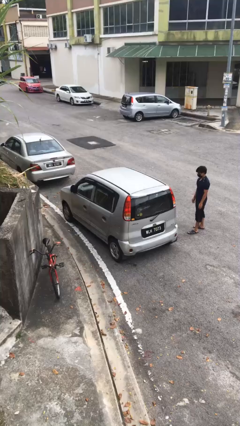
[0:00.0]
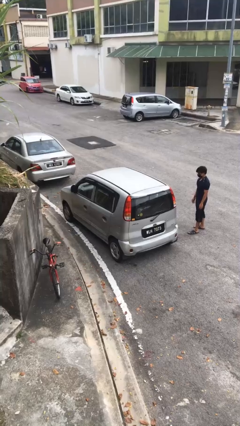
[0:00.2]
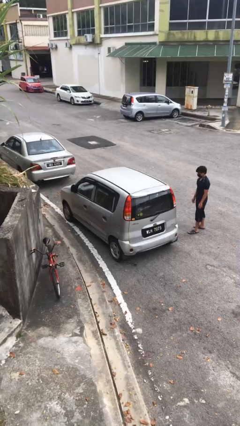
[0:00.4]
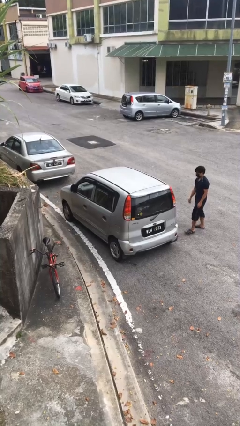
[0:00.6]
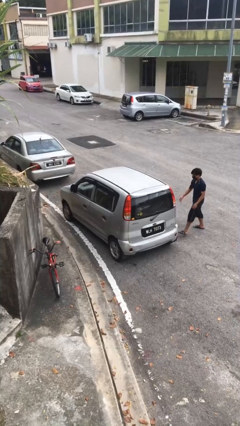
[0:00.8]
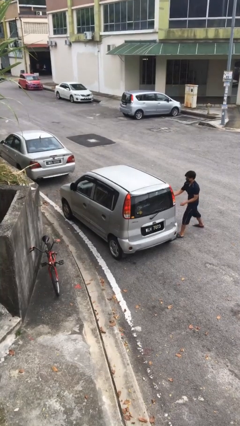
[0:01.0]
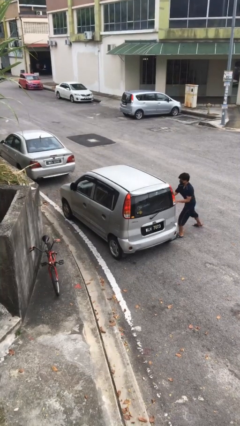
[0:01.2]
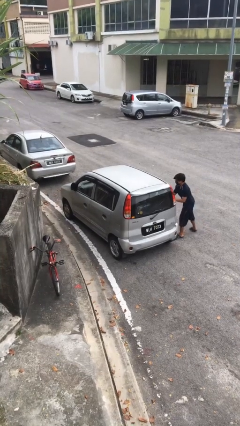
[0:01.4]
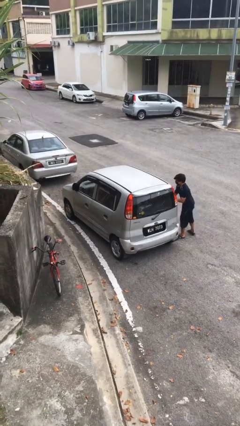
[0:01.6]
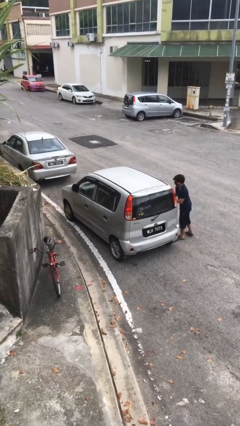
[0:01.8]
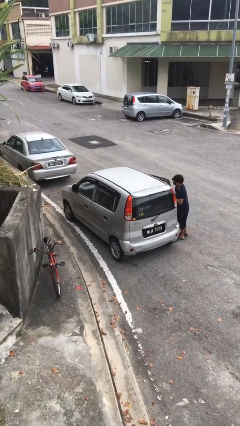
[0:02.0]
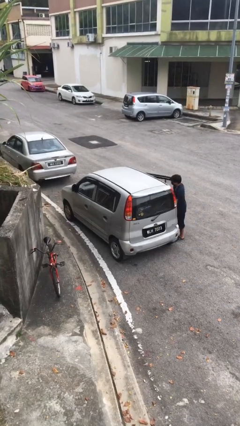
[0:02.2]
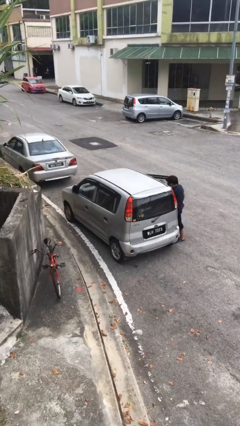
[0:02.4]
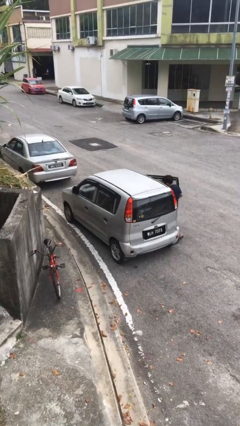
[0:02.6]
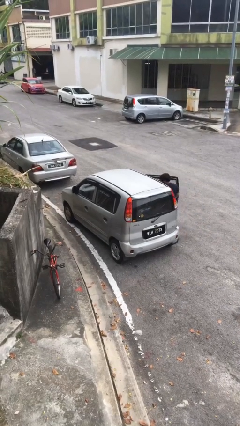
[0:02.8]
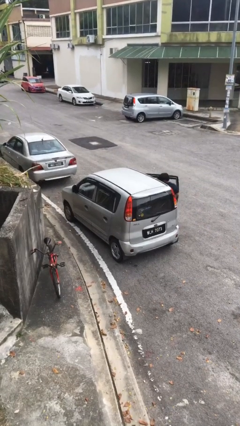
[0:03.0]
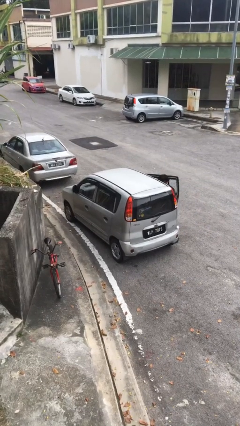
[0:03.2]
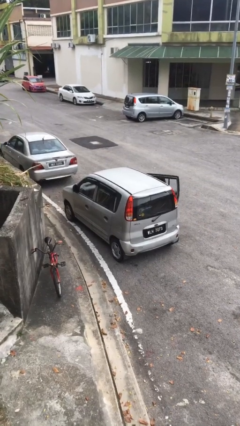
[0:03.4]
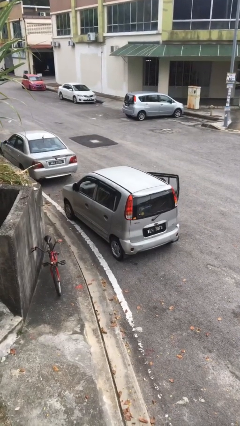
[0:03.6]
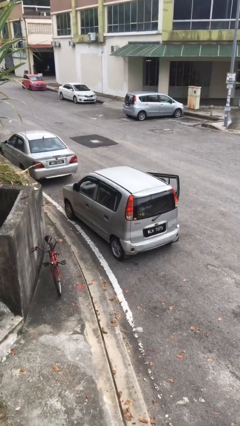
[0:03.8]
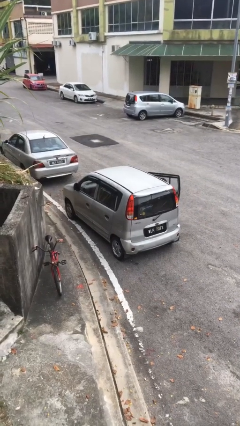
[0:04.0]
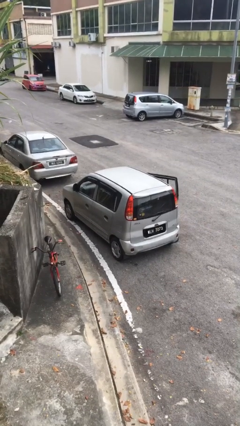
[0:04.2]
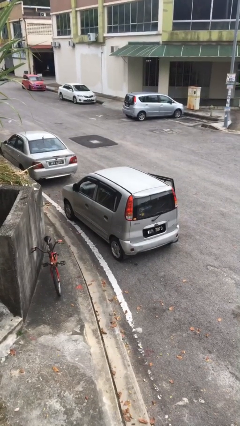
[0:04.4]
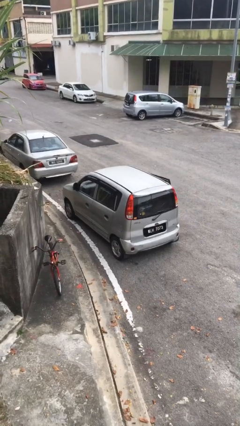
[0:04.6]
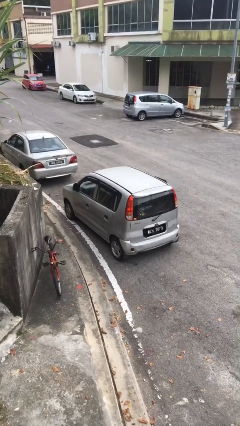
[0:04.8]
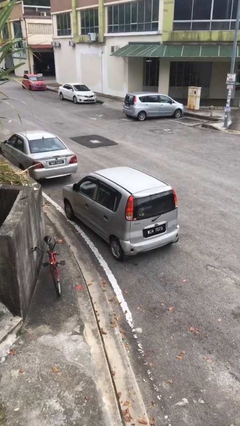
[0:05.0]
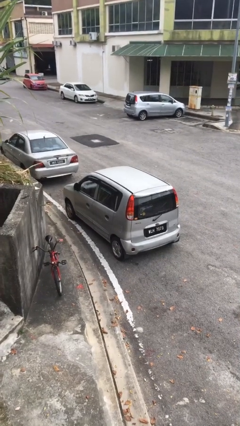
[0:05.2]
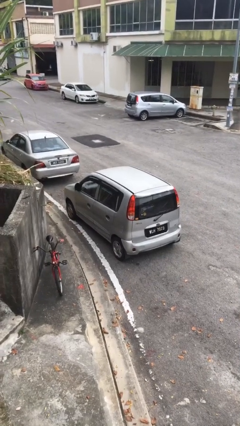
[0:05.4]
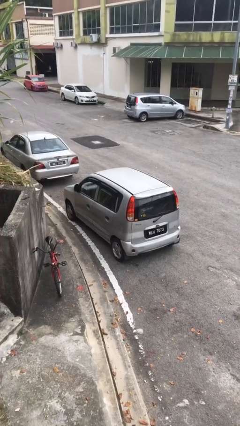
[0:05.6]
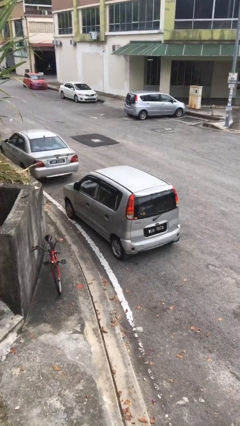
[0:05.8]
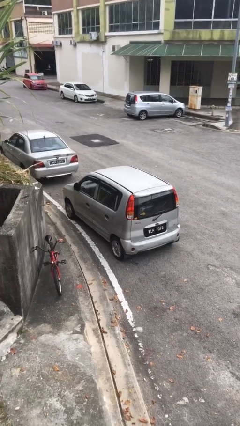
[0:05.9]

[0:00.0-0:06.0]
car picks up person

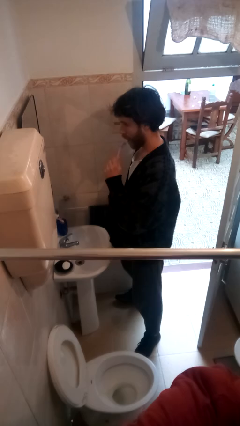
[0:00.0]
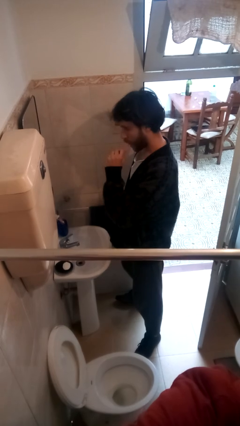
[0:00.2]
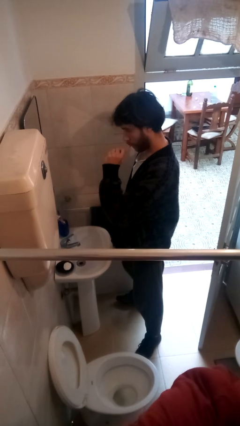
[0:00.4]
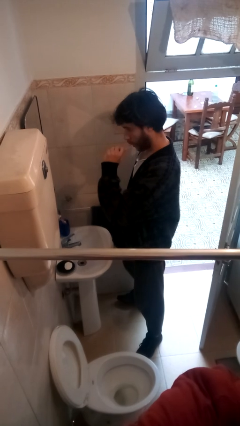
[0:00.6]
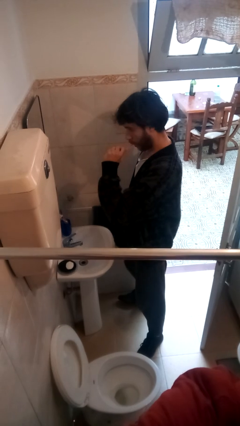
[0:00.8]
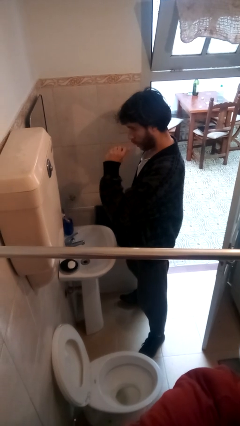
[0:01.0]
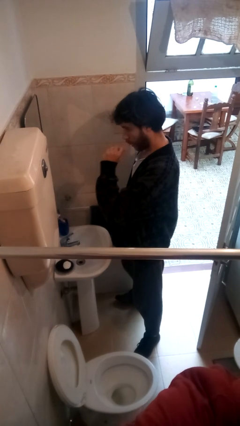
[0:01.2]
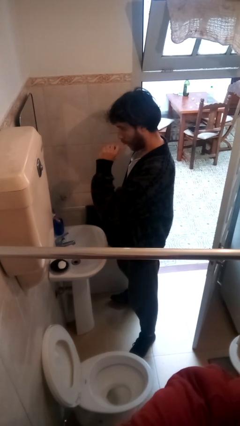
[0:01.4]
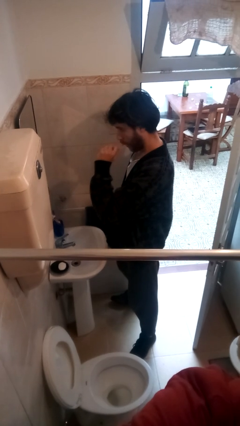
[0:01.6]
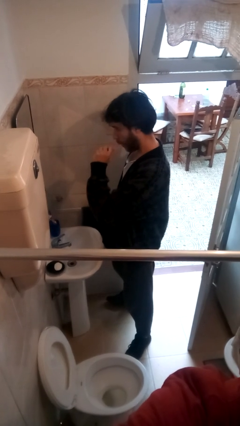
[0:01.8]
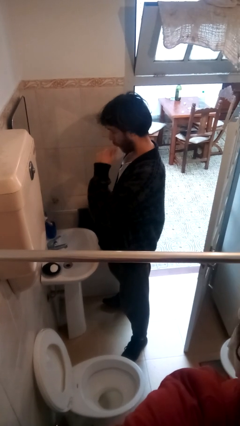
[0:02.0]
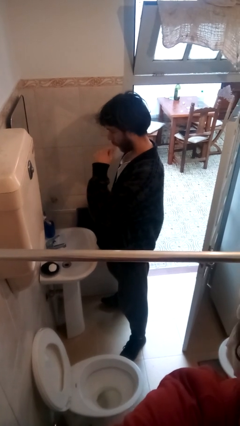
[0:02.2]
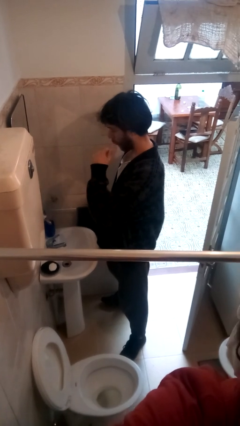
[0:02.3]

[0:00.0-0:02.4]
person brushes teeth

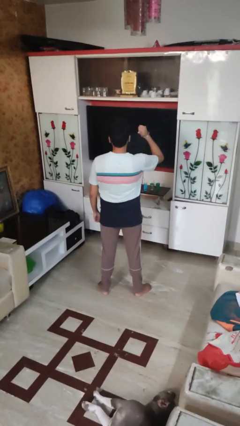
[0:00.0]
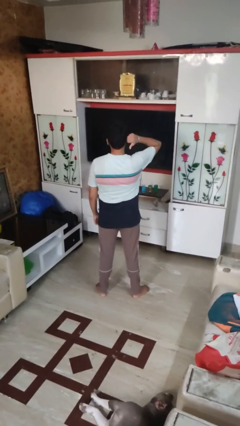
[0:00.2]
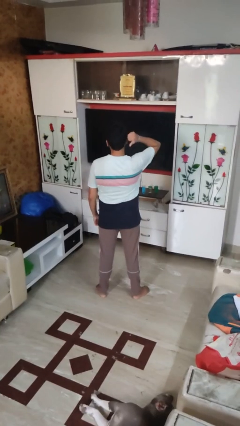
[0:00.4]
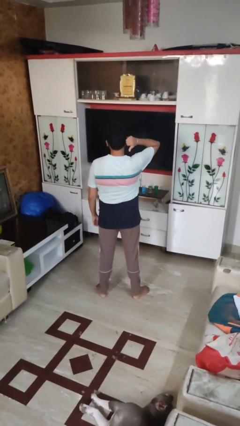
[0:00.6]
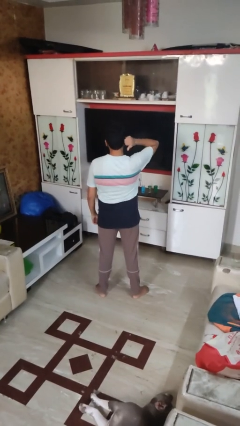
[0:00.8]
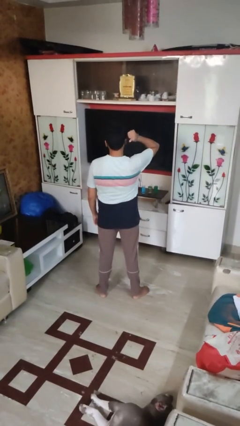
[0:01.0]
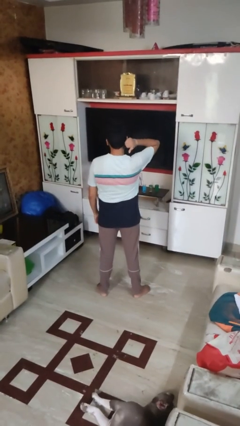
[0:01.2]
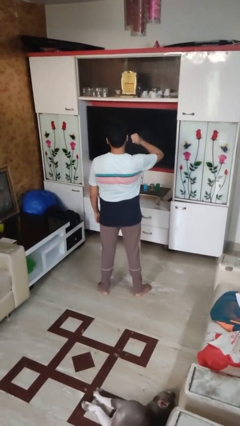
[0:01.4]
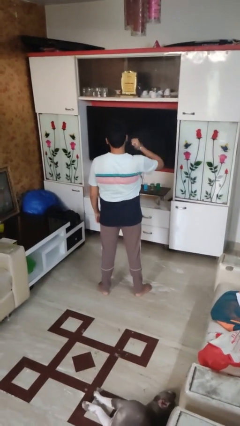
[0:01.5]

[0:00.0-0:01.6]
person gestures behind me

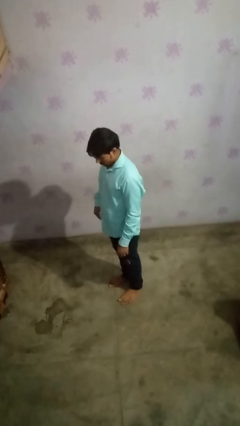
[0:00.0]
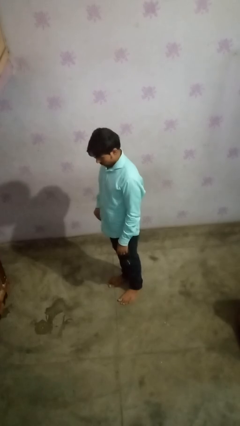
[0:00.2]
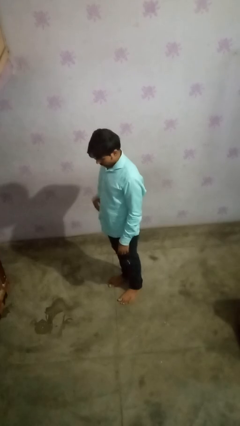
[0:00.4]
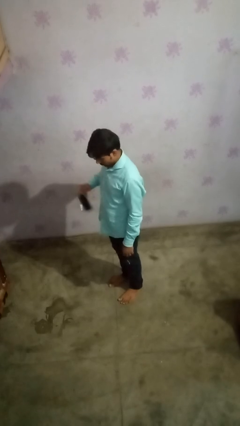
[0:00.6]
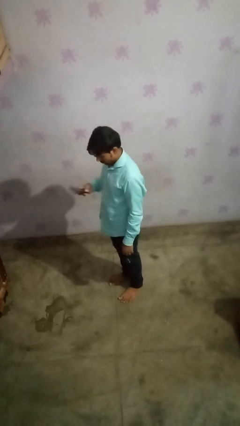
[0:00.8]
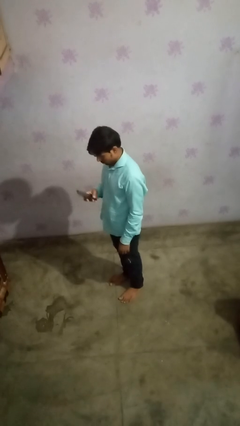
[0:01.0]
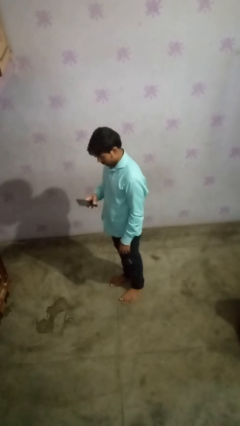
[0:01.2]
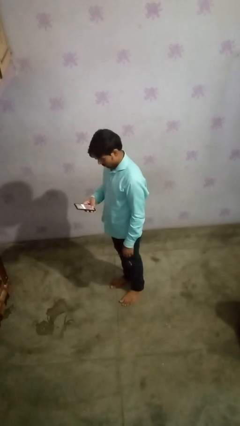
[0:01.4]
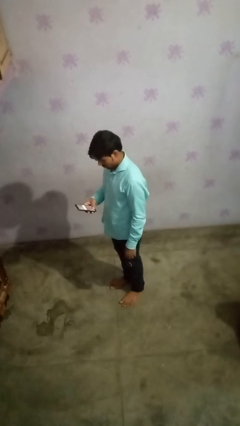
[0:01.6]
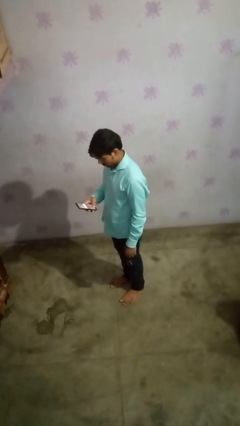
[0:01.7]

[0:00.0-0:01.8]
person takes phone from pocket

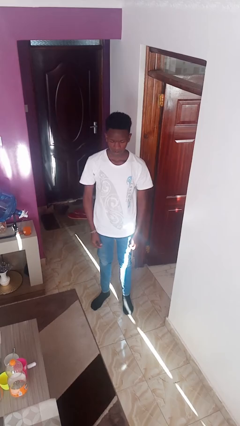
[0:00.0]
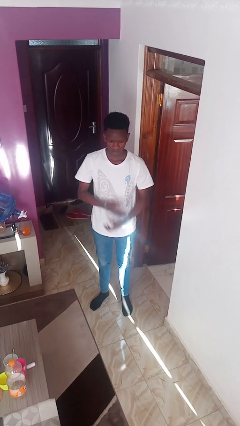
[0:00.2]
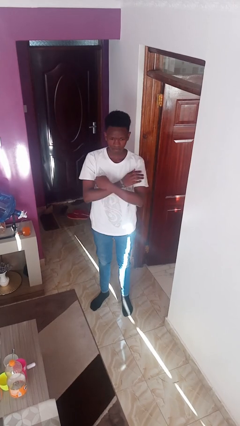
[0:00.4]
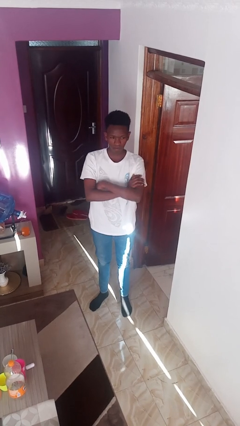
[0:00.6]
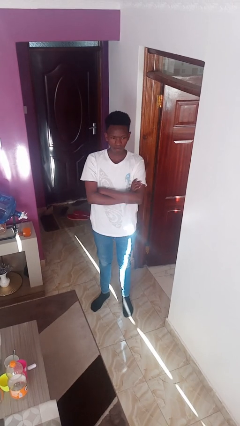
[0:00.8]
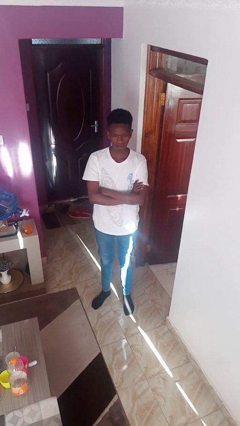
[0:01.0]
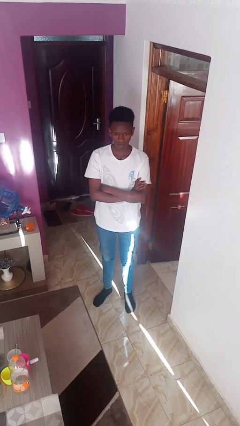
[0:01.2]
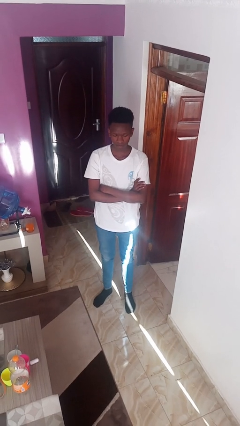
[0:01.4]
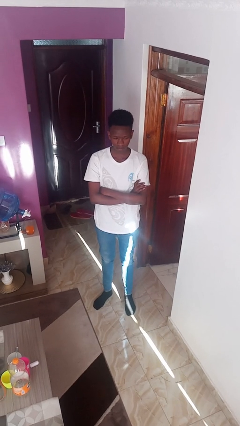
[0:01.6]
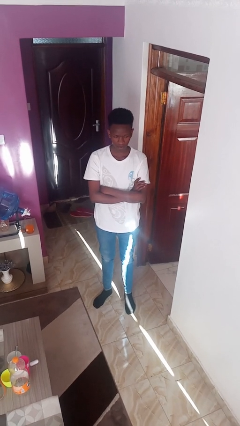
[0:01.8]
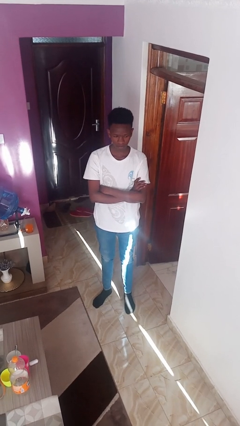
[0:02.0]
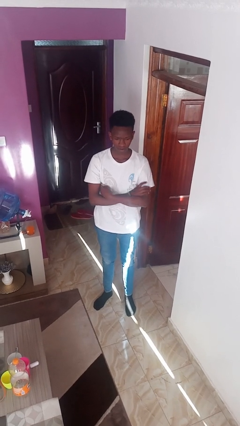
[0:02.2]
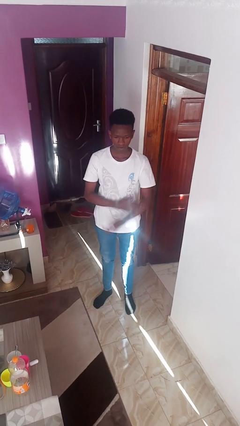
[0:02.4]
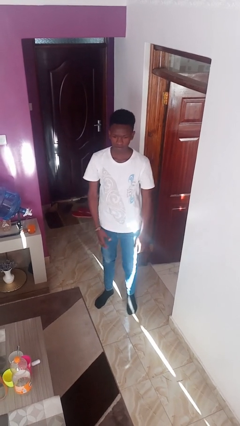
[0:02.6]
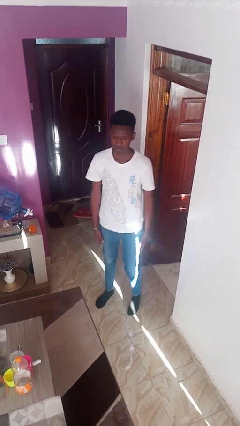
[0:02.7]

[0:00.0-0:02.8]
person crosses arms

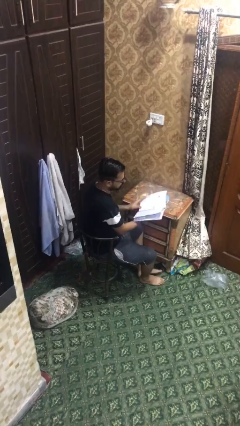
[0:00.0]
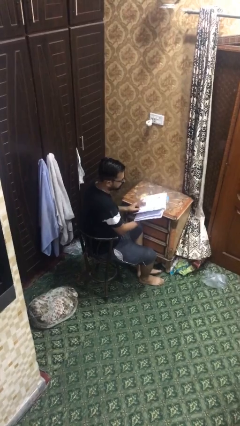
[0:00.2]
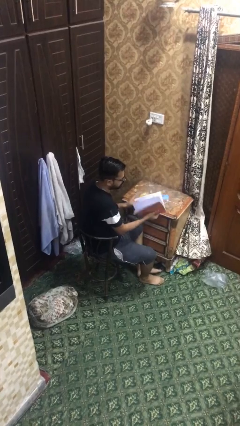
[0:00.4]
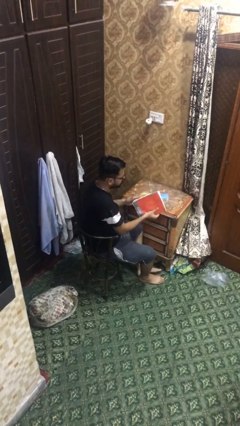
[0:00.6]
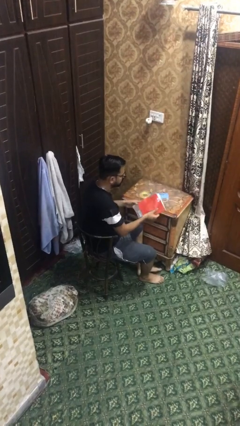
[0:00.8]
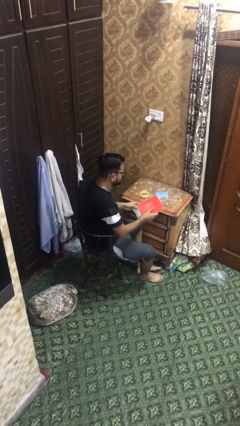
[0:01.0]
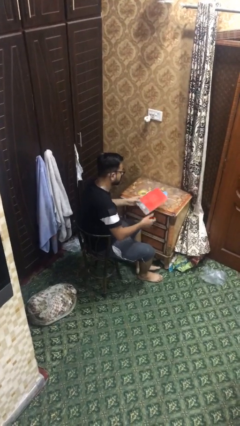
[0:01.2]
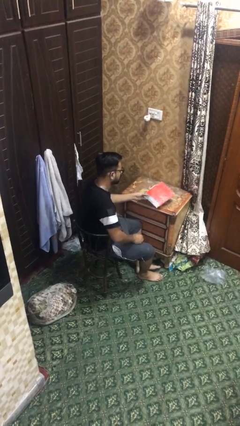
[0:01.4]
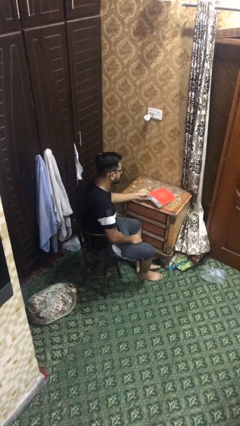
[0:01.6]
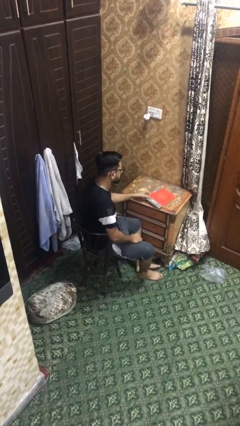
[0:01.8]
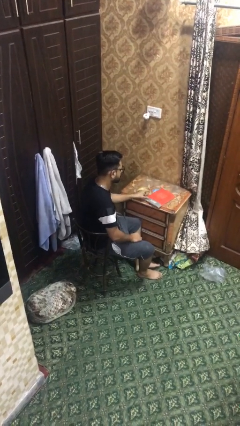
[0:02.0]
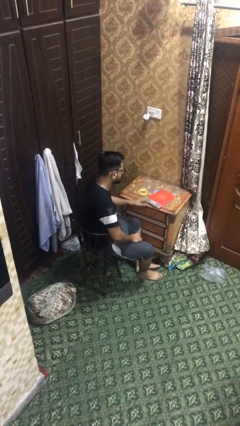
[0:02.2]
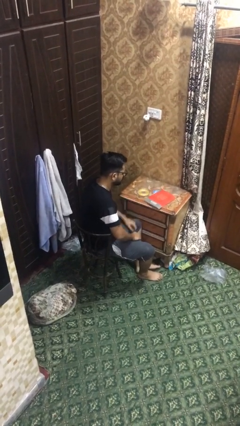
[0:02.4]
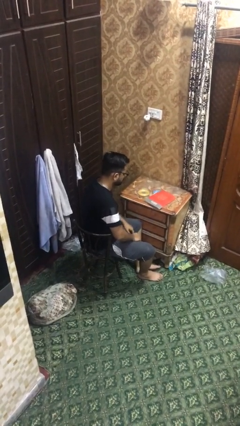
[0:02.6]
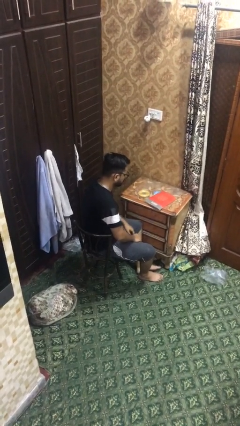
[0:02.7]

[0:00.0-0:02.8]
person puts down object on table

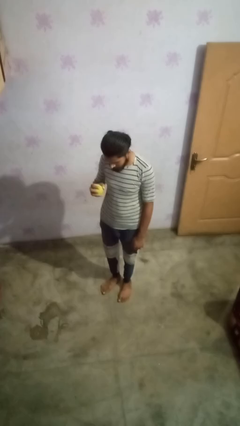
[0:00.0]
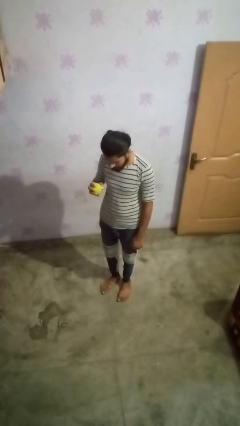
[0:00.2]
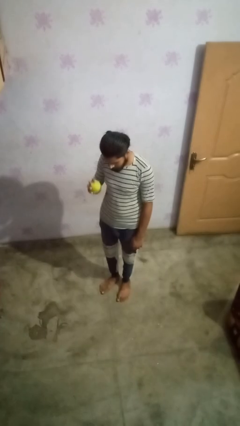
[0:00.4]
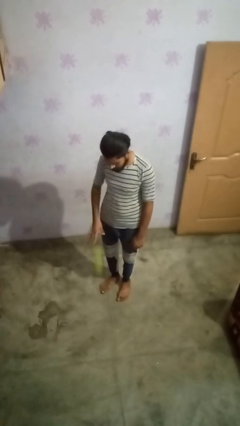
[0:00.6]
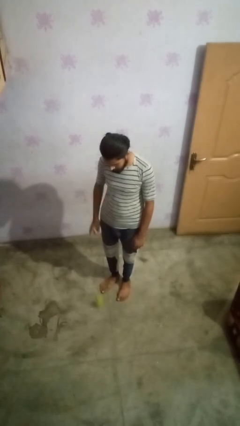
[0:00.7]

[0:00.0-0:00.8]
person bounces ball on floor
